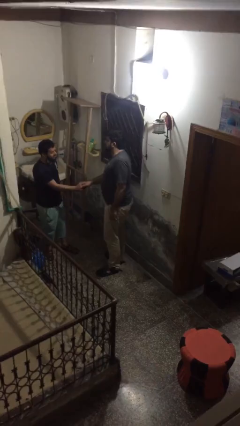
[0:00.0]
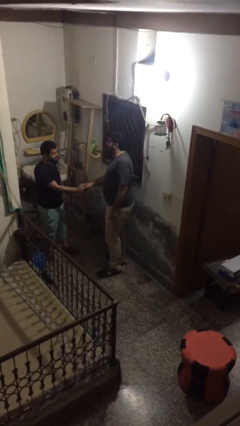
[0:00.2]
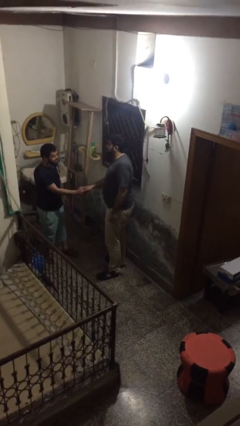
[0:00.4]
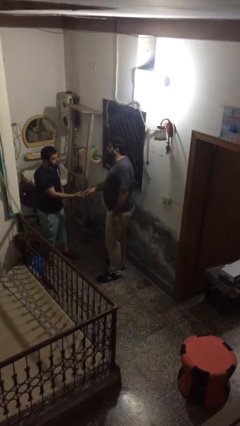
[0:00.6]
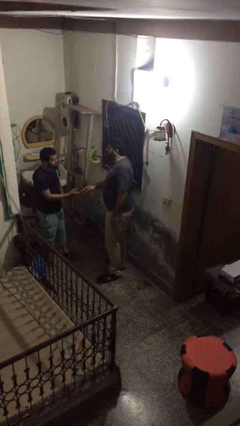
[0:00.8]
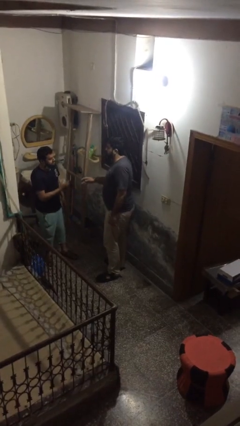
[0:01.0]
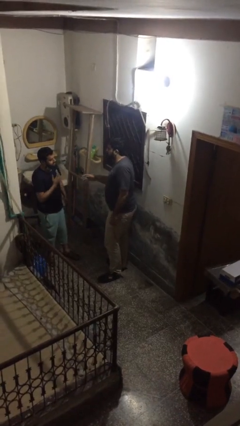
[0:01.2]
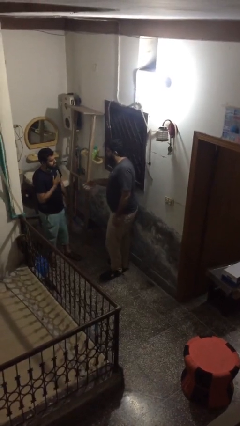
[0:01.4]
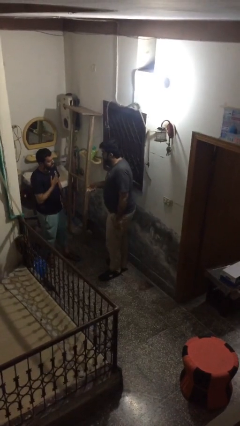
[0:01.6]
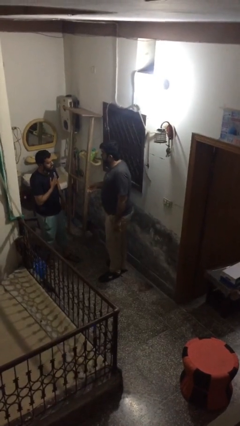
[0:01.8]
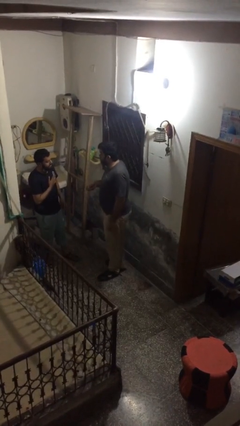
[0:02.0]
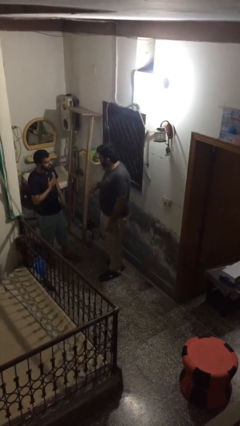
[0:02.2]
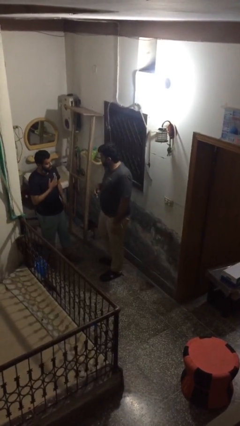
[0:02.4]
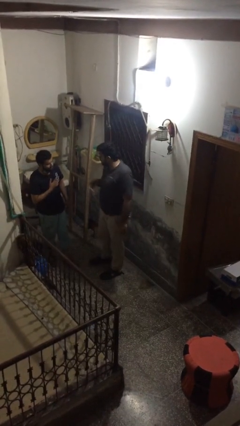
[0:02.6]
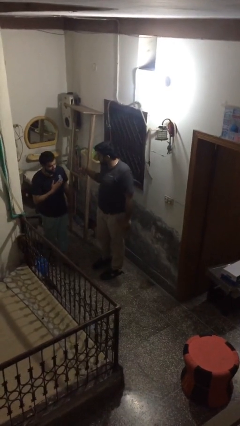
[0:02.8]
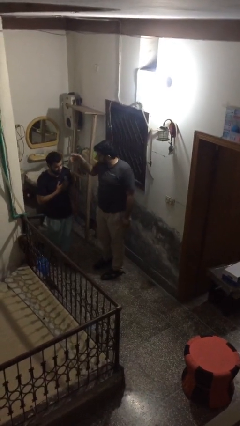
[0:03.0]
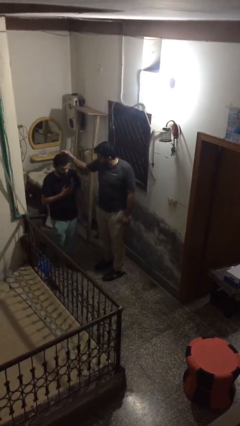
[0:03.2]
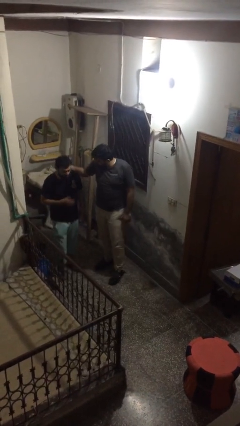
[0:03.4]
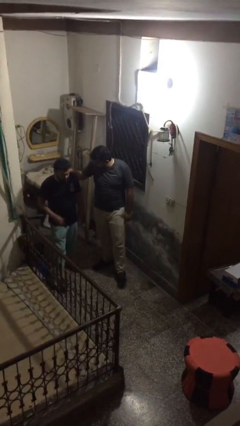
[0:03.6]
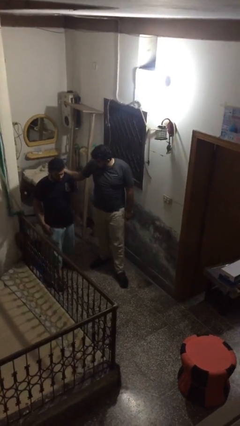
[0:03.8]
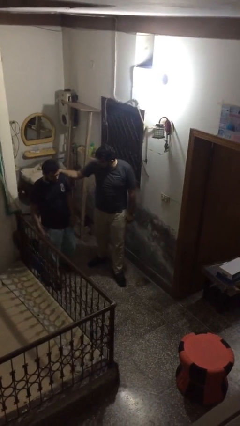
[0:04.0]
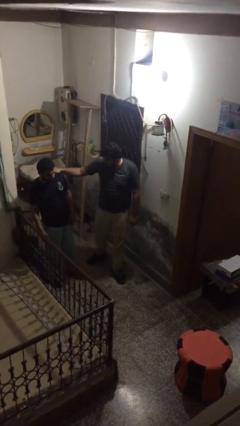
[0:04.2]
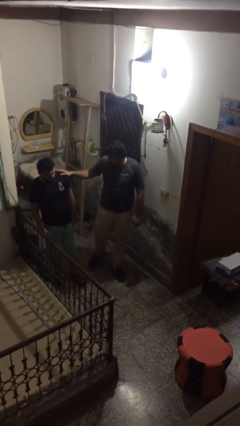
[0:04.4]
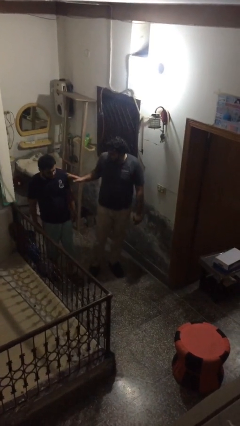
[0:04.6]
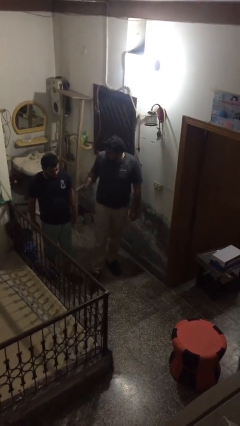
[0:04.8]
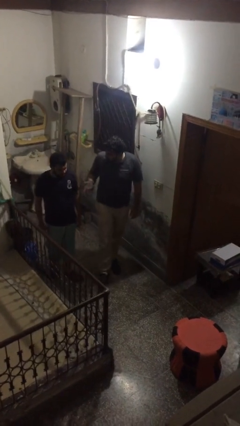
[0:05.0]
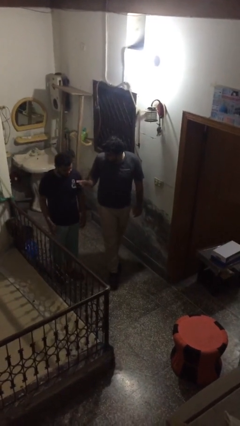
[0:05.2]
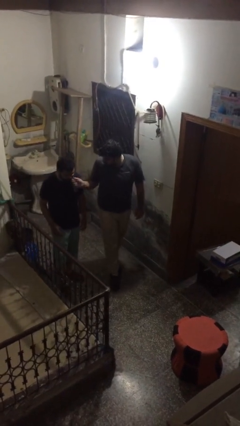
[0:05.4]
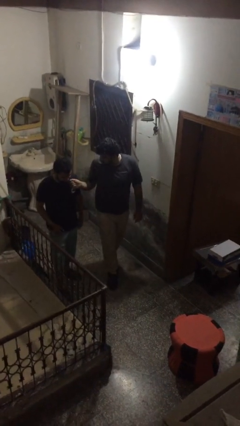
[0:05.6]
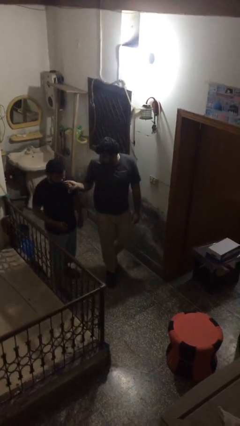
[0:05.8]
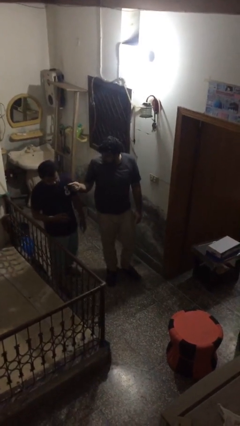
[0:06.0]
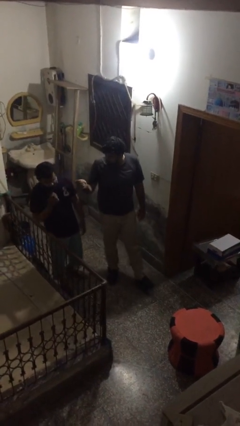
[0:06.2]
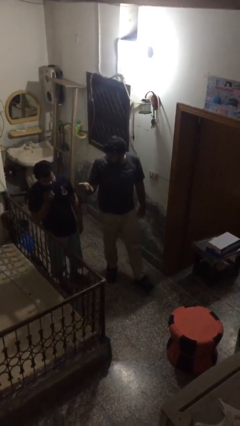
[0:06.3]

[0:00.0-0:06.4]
person talks to person

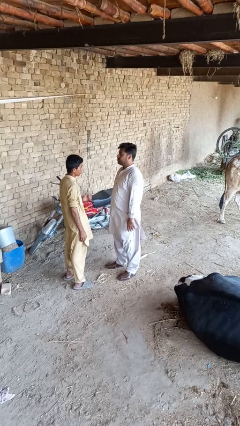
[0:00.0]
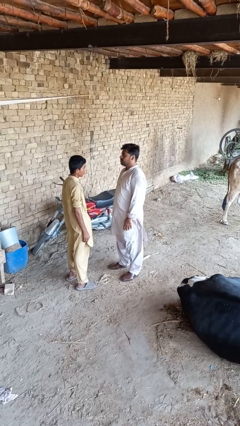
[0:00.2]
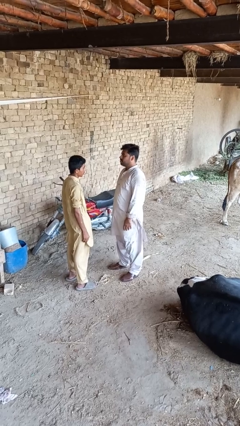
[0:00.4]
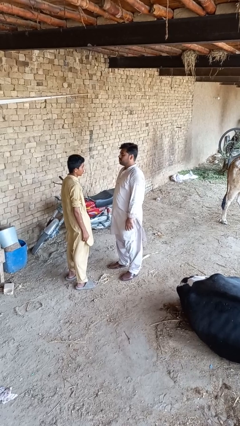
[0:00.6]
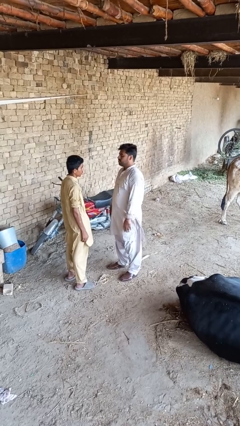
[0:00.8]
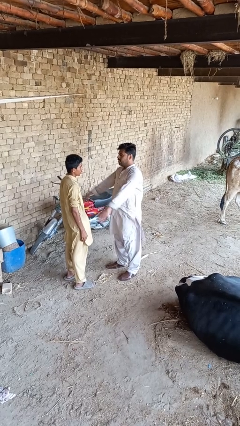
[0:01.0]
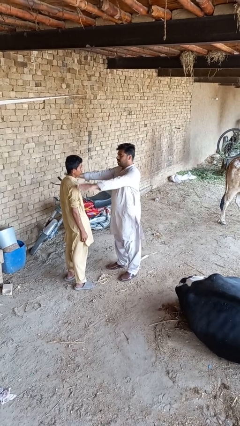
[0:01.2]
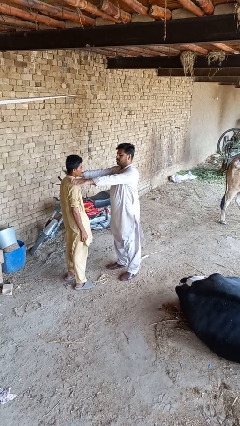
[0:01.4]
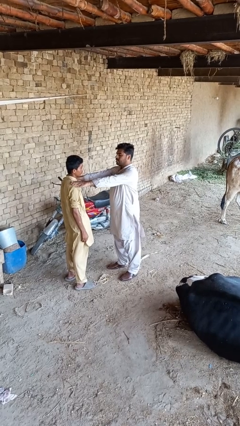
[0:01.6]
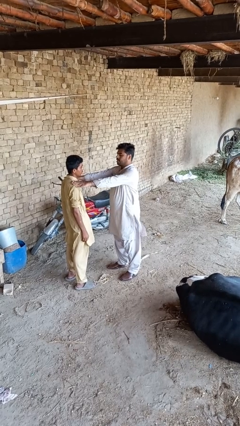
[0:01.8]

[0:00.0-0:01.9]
person pounds shoulders of person

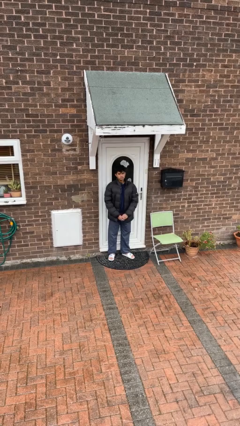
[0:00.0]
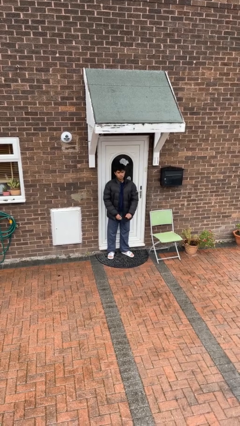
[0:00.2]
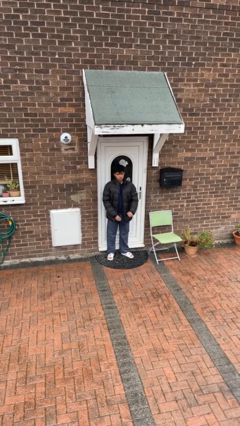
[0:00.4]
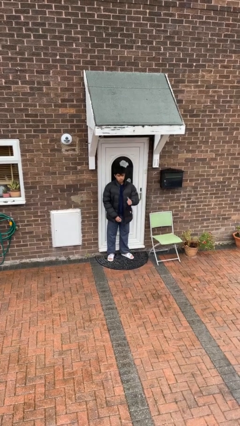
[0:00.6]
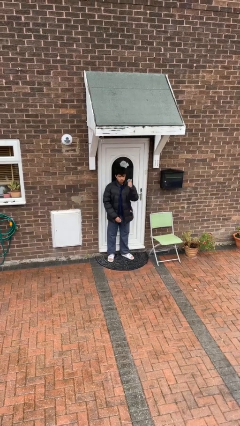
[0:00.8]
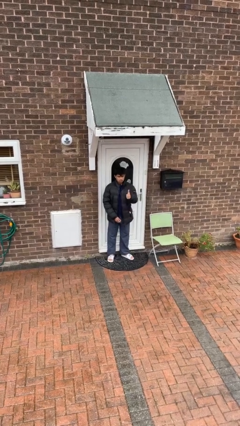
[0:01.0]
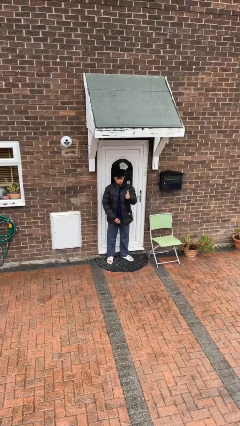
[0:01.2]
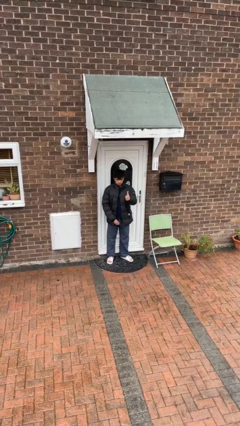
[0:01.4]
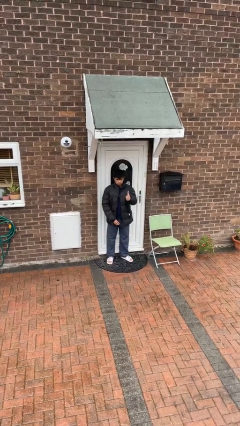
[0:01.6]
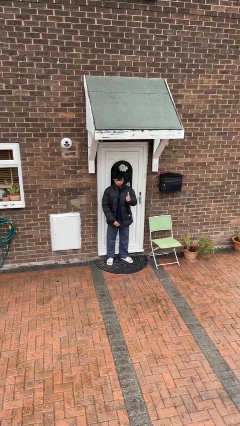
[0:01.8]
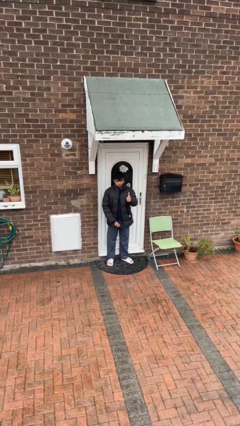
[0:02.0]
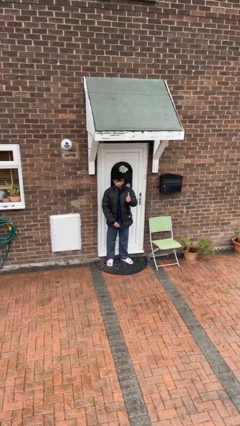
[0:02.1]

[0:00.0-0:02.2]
person gestures thumbs up

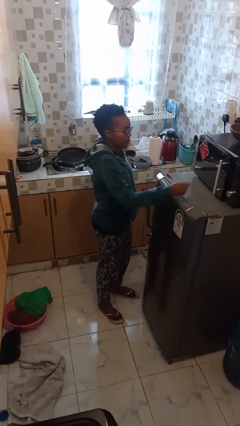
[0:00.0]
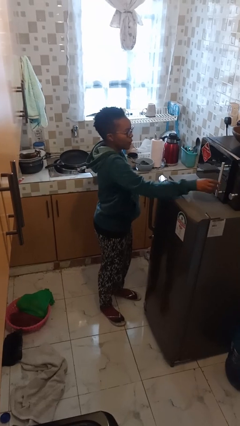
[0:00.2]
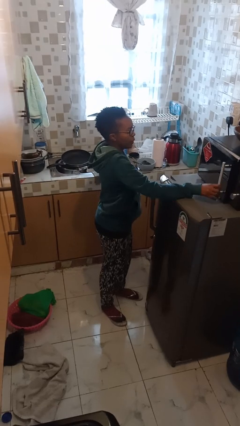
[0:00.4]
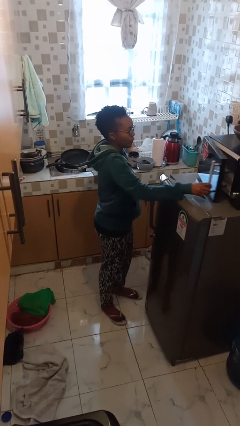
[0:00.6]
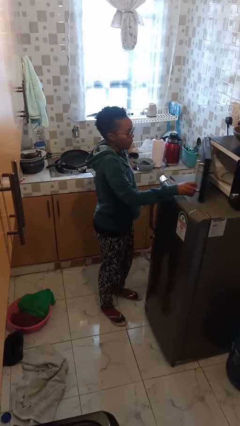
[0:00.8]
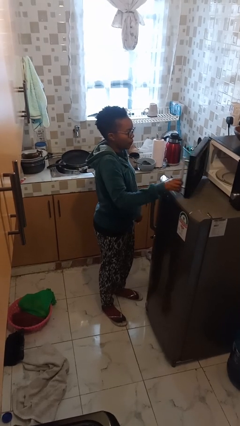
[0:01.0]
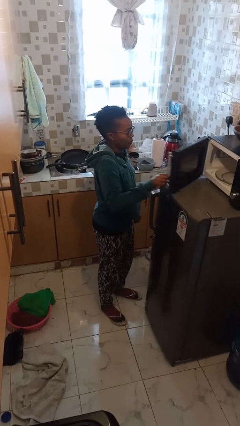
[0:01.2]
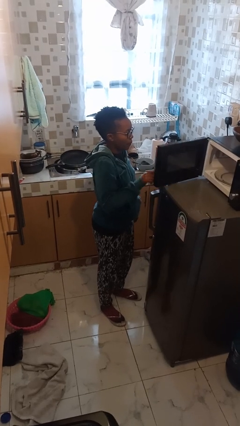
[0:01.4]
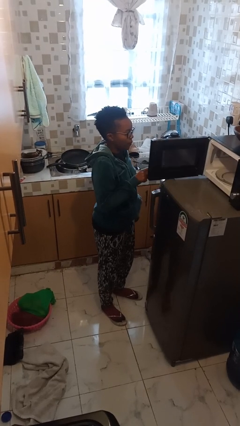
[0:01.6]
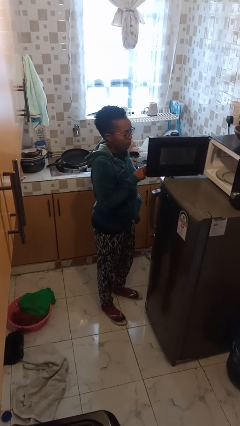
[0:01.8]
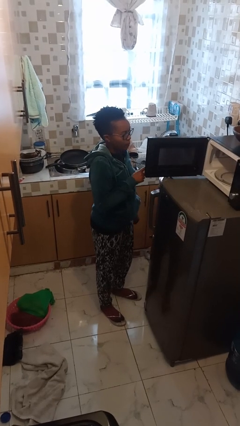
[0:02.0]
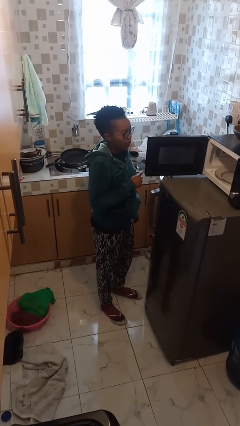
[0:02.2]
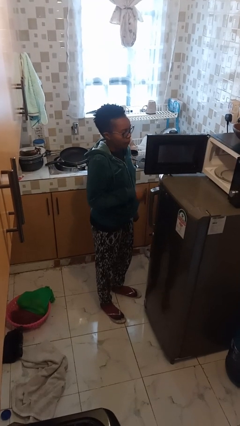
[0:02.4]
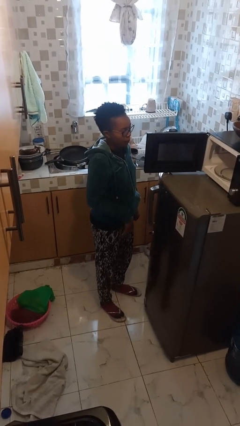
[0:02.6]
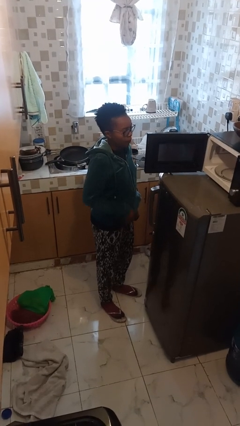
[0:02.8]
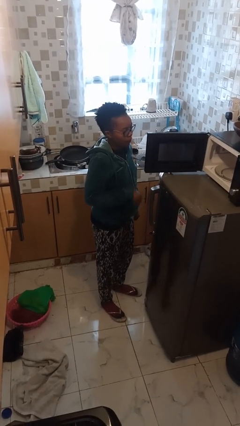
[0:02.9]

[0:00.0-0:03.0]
person opens microwave

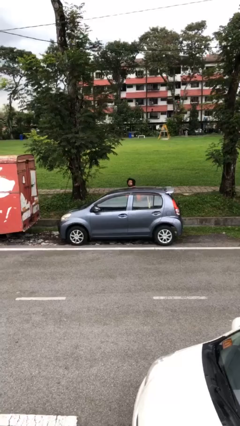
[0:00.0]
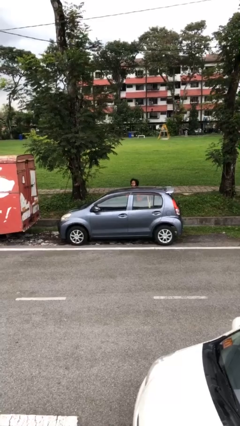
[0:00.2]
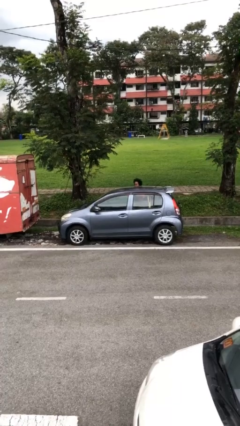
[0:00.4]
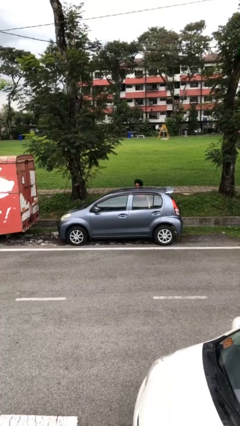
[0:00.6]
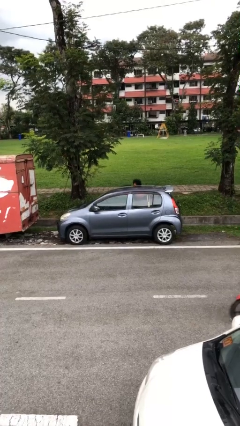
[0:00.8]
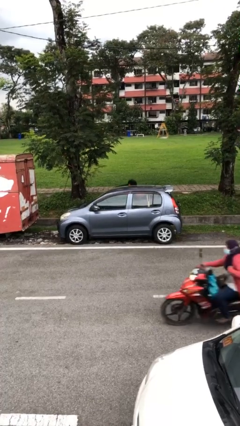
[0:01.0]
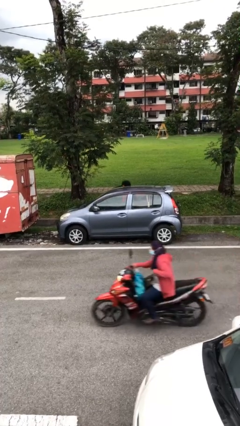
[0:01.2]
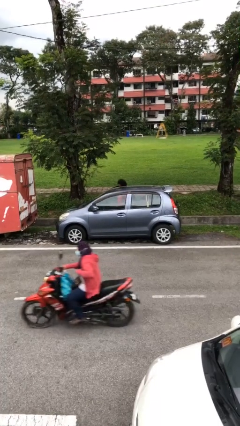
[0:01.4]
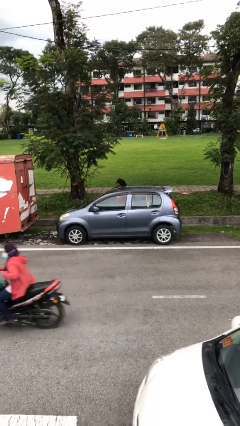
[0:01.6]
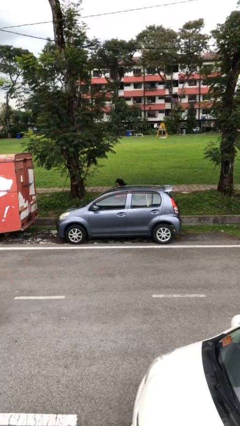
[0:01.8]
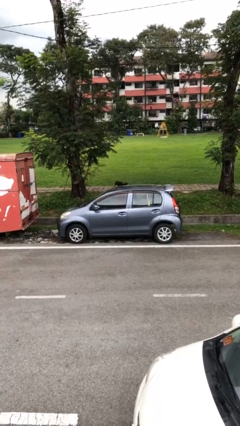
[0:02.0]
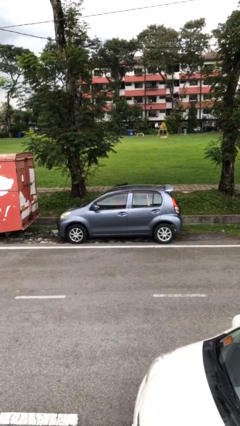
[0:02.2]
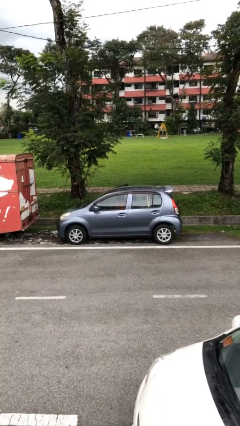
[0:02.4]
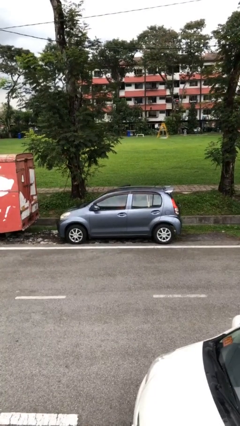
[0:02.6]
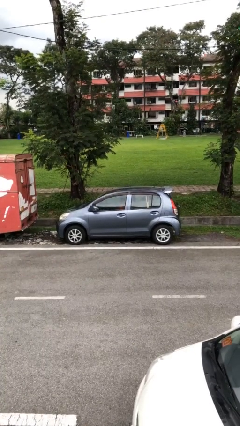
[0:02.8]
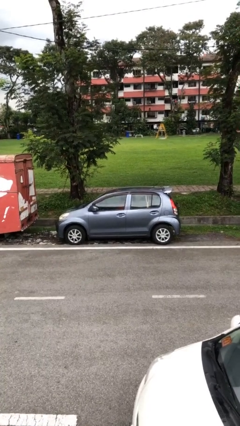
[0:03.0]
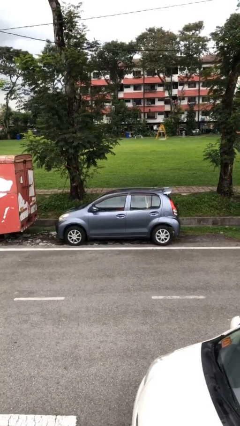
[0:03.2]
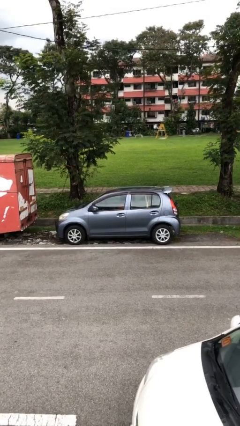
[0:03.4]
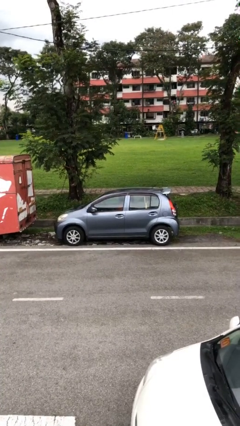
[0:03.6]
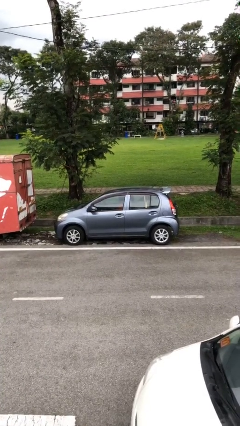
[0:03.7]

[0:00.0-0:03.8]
car picks up person

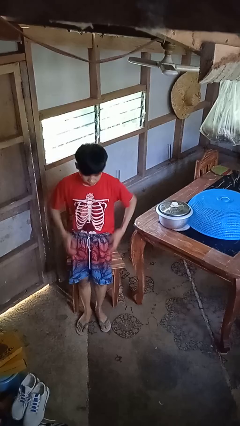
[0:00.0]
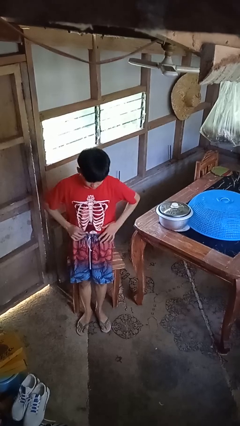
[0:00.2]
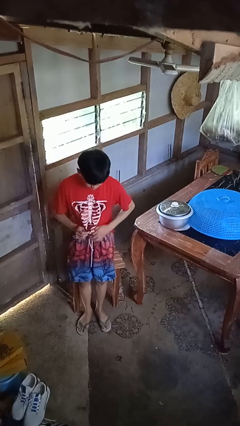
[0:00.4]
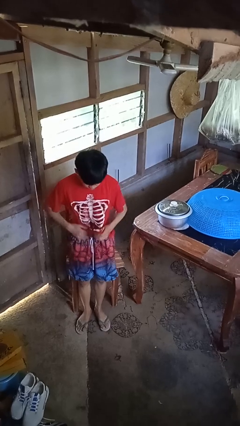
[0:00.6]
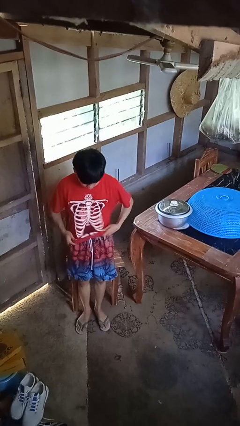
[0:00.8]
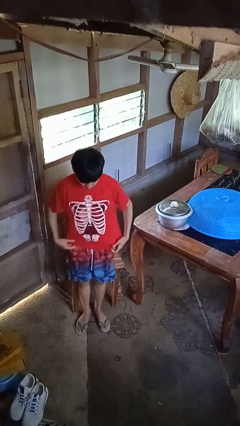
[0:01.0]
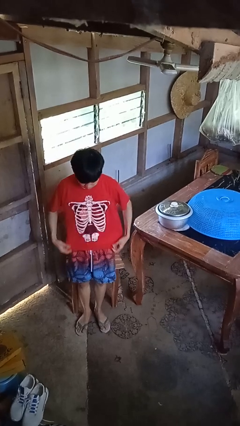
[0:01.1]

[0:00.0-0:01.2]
person untucks shirt
